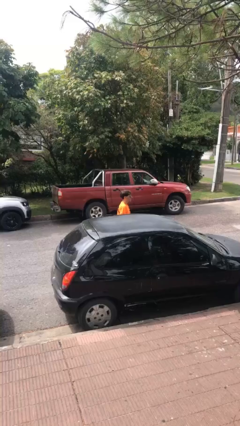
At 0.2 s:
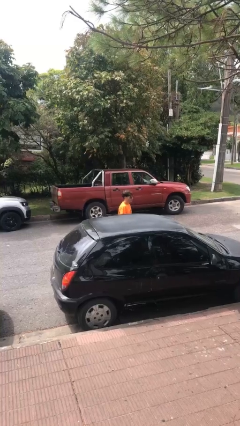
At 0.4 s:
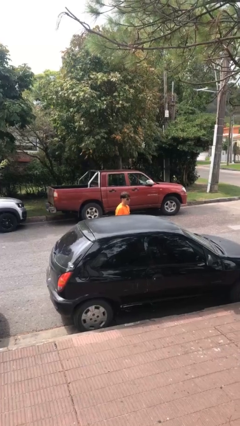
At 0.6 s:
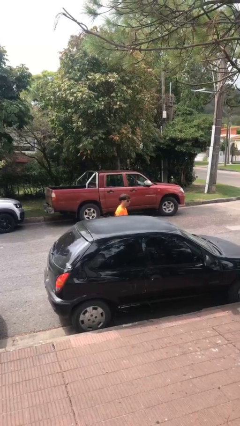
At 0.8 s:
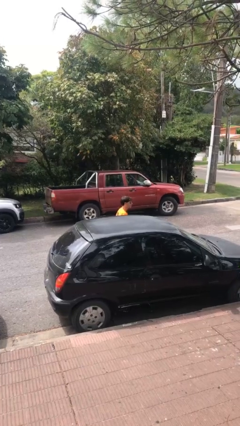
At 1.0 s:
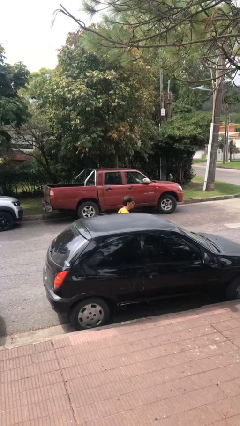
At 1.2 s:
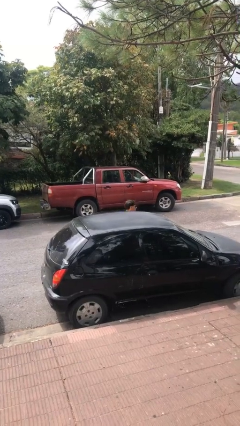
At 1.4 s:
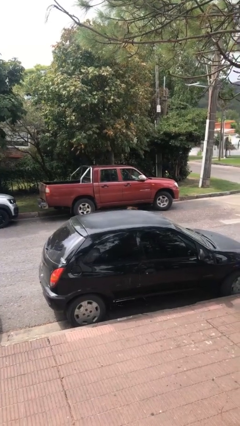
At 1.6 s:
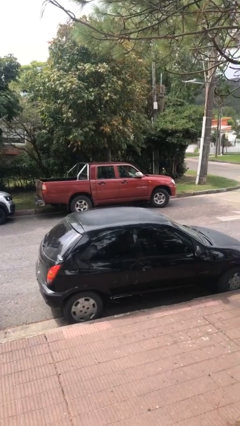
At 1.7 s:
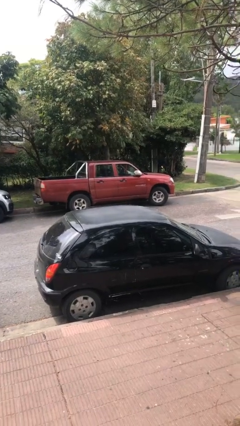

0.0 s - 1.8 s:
person enters car

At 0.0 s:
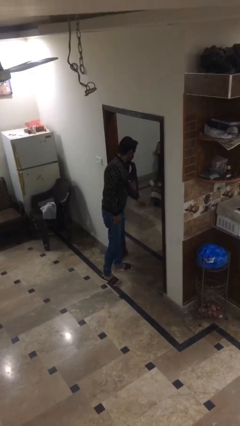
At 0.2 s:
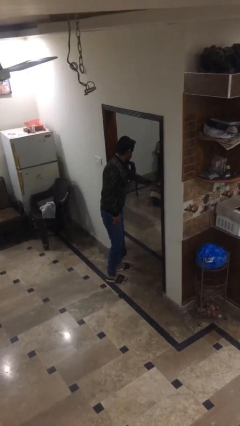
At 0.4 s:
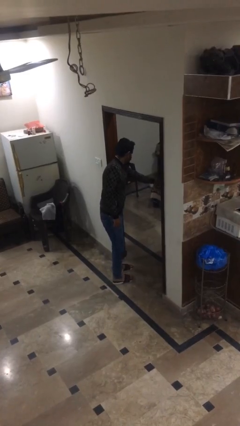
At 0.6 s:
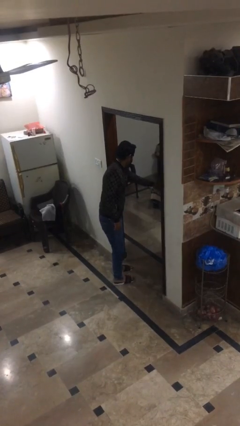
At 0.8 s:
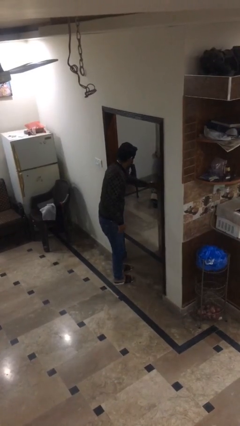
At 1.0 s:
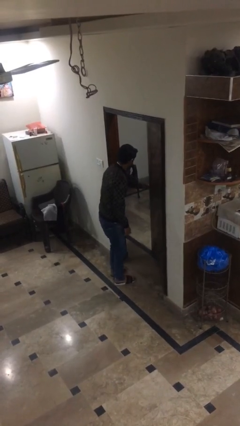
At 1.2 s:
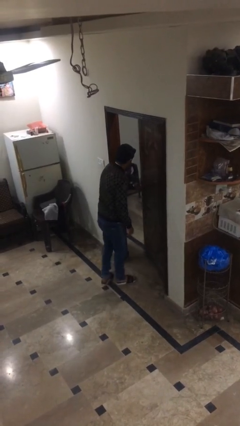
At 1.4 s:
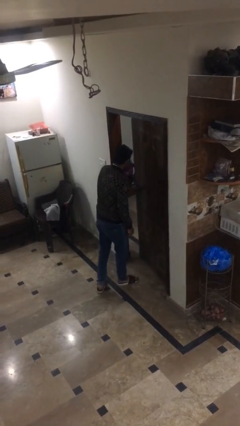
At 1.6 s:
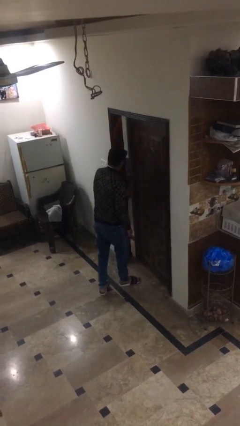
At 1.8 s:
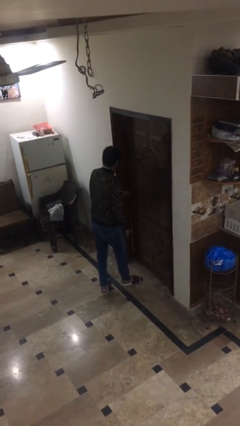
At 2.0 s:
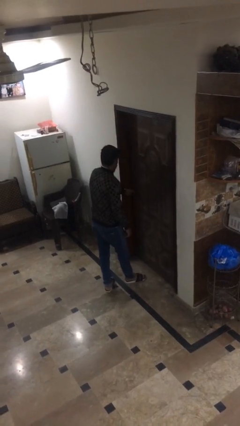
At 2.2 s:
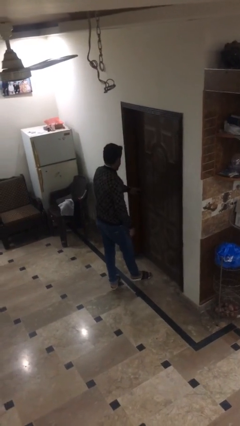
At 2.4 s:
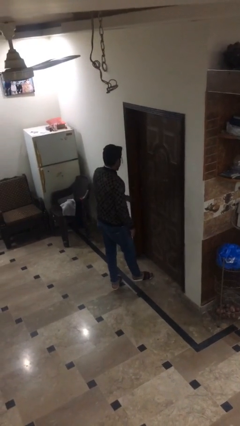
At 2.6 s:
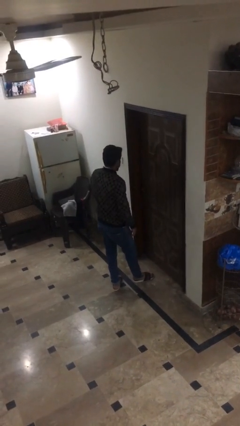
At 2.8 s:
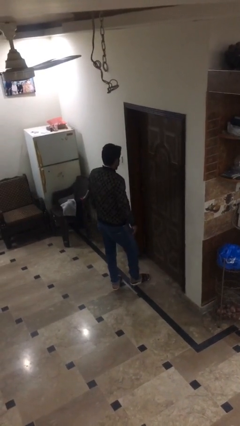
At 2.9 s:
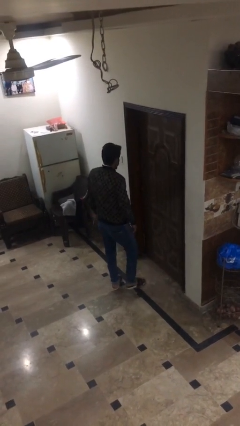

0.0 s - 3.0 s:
person closes facility door

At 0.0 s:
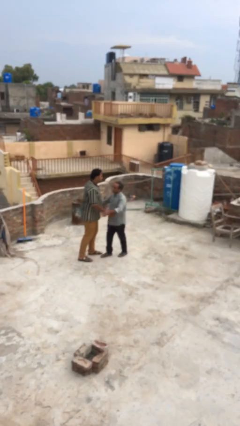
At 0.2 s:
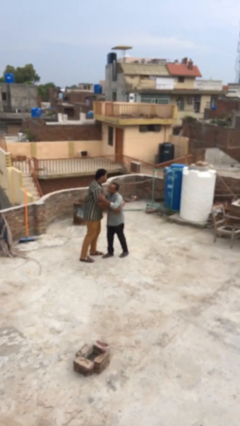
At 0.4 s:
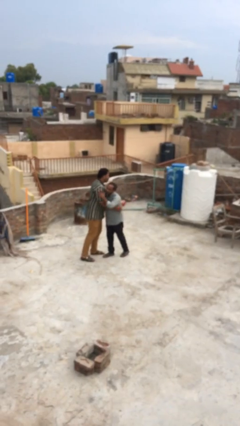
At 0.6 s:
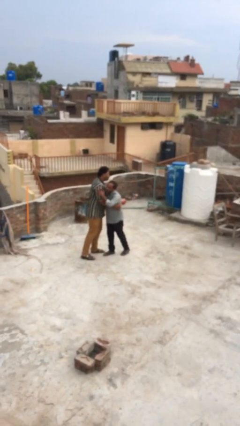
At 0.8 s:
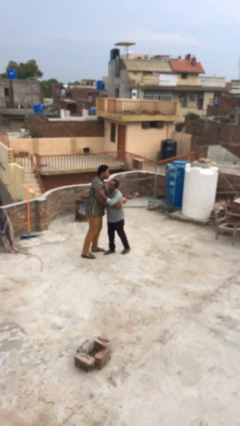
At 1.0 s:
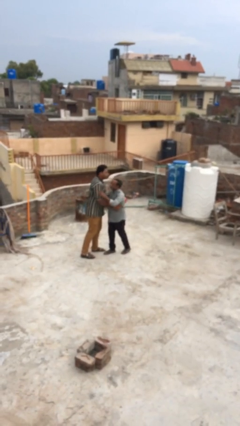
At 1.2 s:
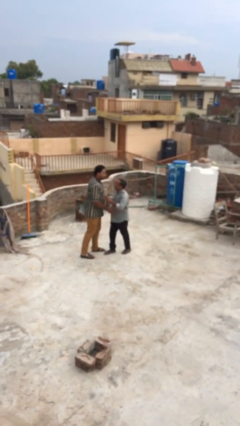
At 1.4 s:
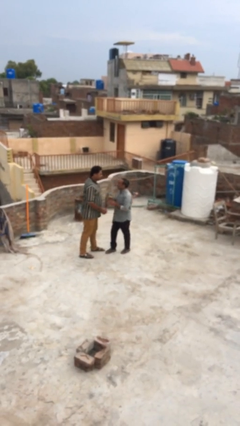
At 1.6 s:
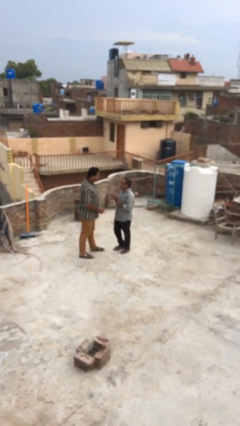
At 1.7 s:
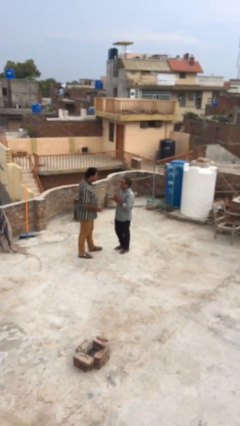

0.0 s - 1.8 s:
person embraces person

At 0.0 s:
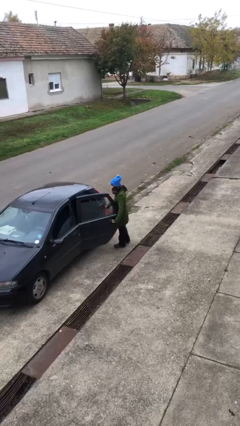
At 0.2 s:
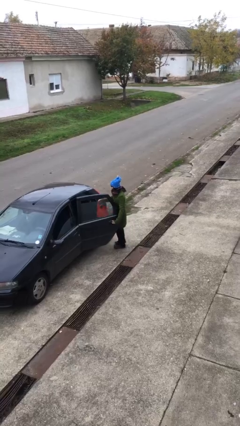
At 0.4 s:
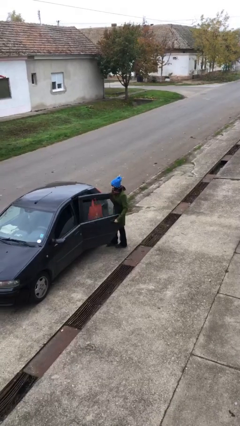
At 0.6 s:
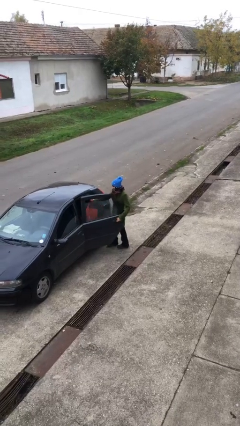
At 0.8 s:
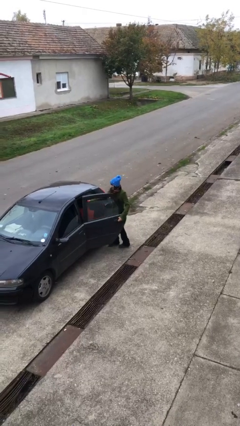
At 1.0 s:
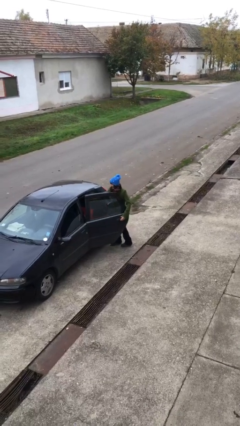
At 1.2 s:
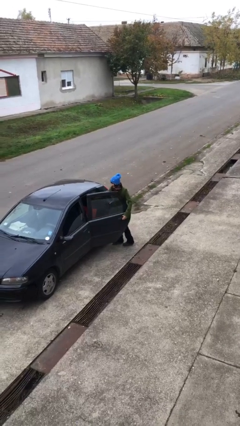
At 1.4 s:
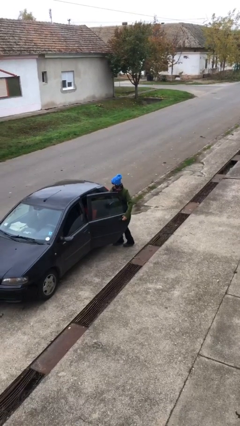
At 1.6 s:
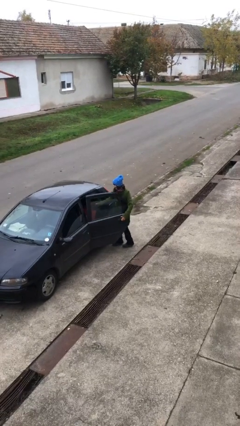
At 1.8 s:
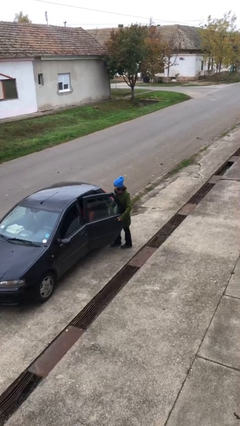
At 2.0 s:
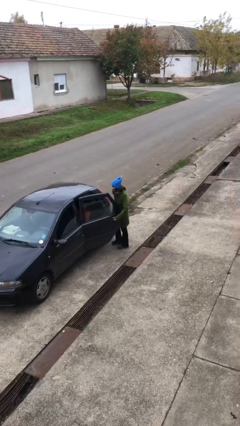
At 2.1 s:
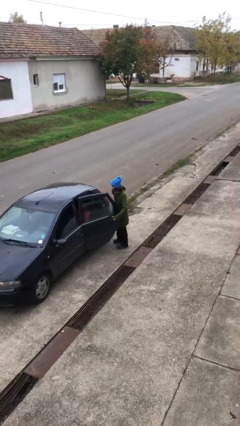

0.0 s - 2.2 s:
person loads car

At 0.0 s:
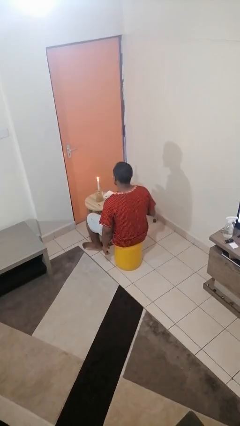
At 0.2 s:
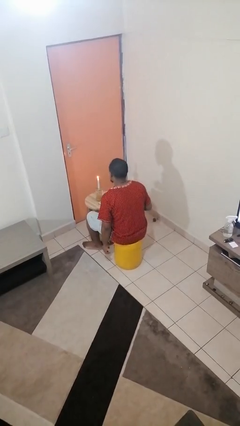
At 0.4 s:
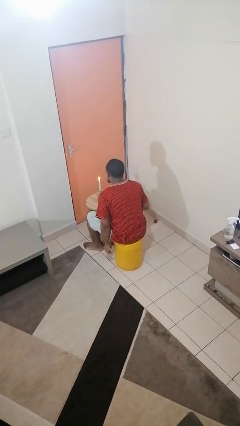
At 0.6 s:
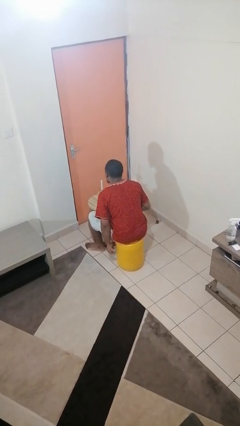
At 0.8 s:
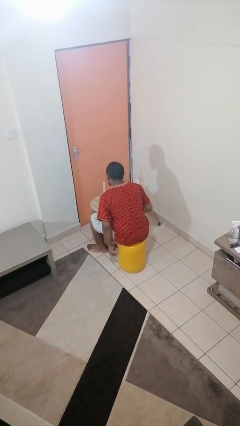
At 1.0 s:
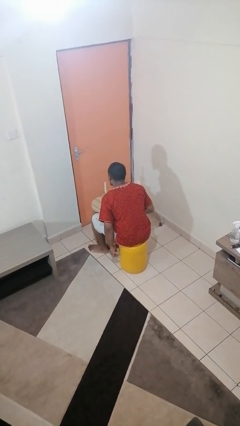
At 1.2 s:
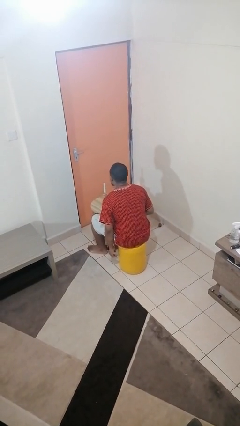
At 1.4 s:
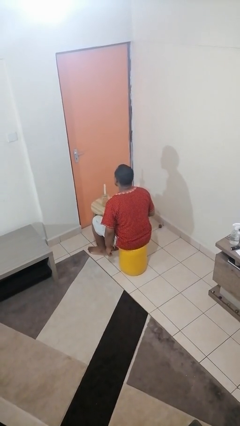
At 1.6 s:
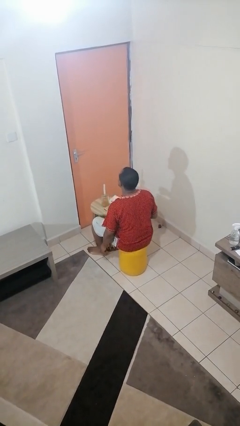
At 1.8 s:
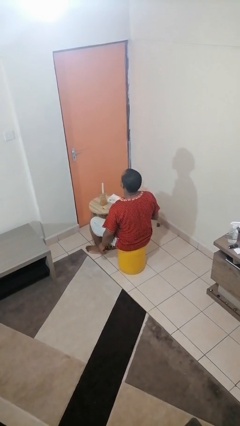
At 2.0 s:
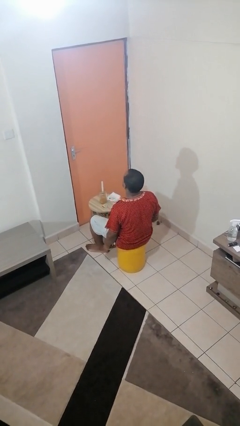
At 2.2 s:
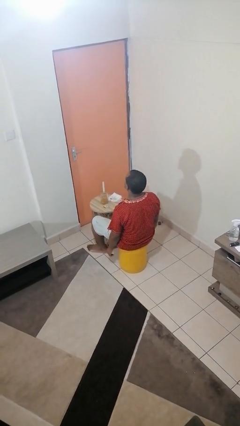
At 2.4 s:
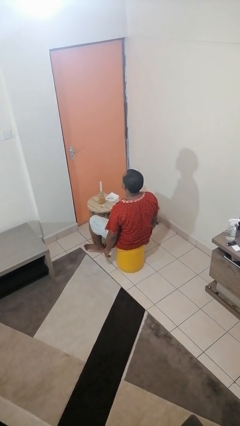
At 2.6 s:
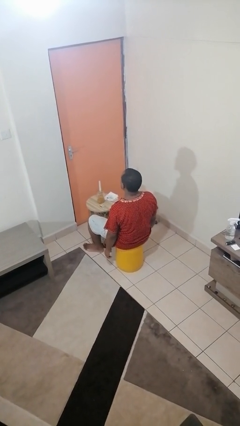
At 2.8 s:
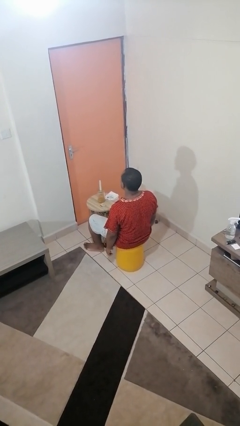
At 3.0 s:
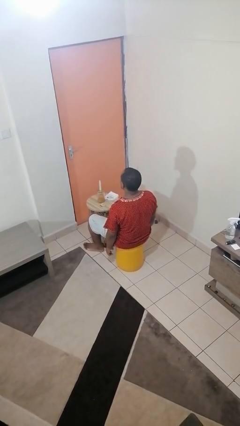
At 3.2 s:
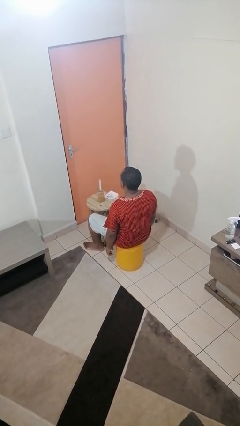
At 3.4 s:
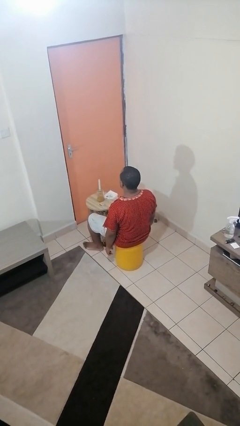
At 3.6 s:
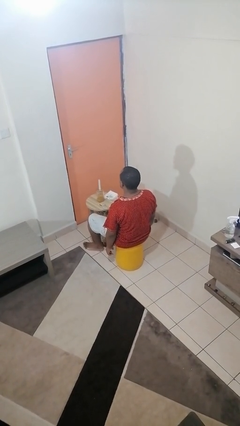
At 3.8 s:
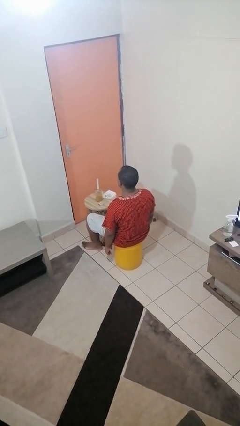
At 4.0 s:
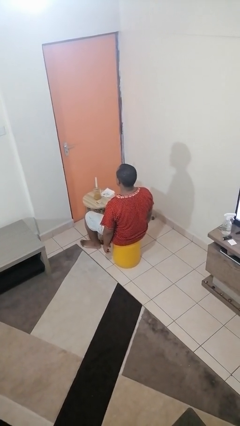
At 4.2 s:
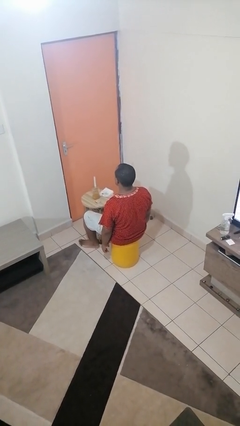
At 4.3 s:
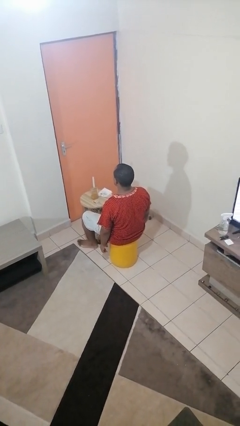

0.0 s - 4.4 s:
person extinguishes candle

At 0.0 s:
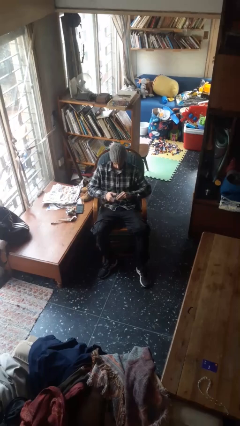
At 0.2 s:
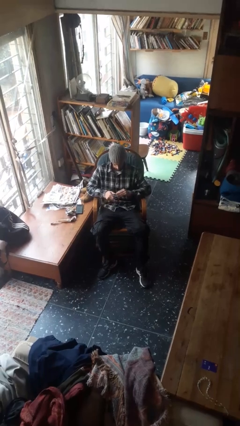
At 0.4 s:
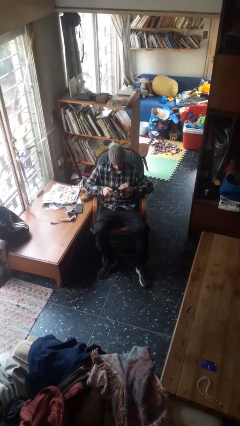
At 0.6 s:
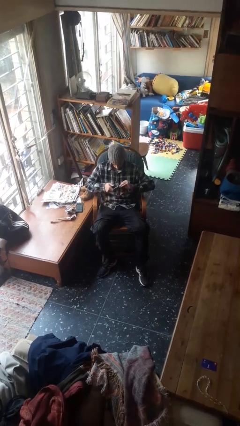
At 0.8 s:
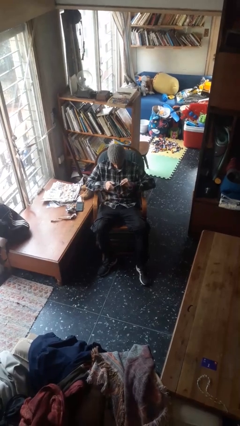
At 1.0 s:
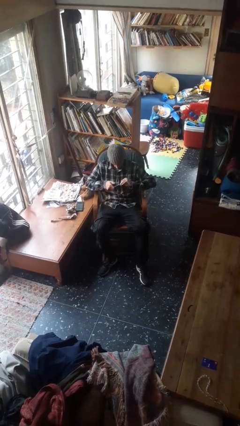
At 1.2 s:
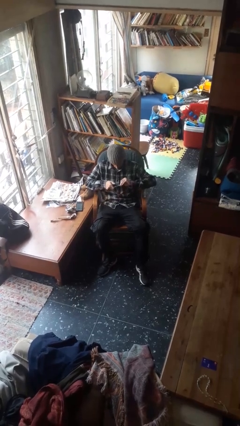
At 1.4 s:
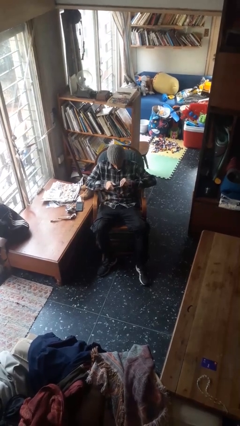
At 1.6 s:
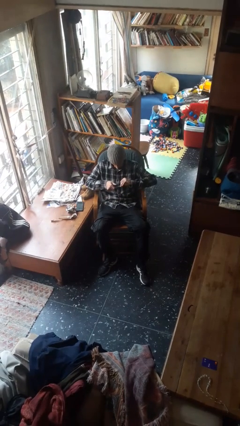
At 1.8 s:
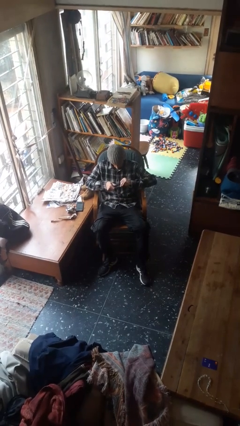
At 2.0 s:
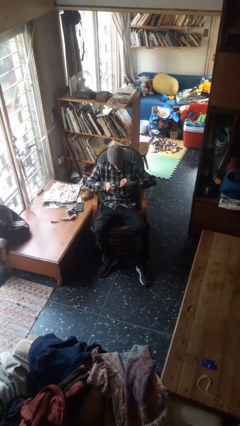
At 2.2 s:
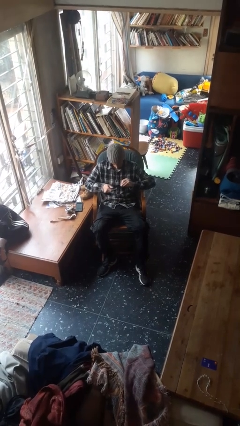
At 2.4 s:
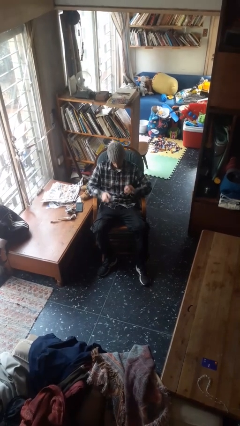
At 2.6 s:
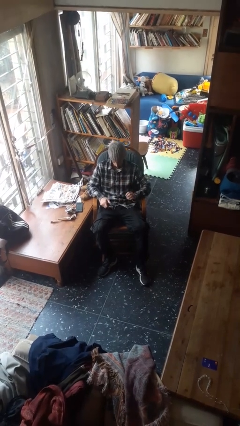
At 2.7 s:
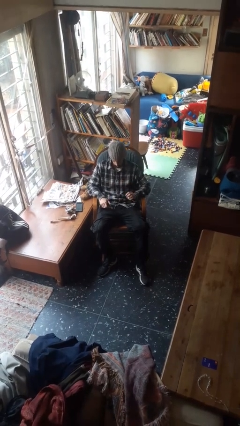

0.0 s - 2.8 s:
person clips fingernails

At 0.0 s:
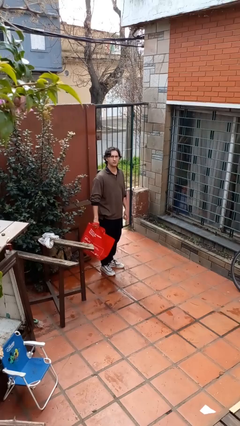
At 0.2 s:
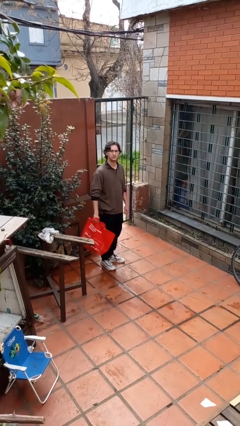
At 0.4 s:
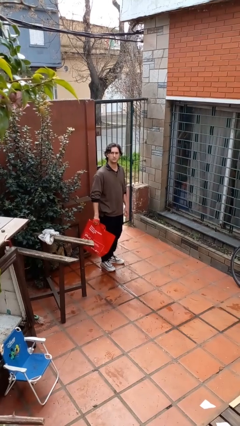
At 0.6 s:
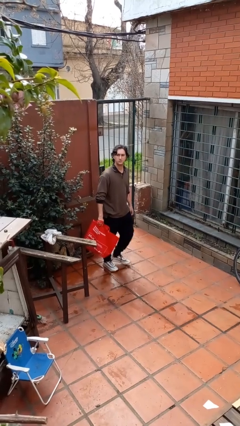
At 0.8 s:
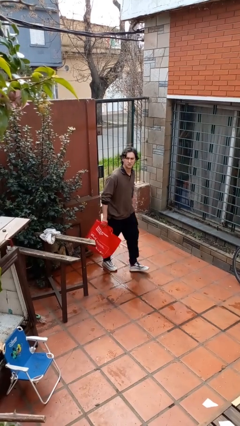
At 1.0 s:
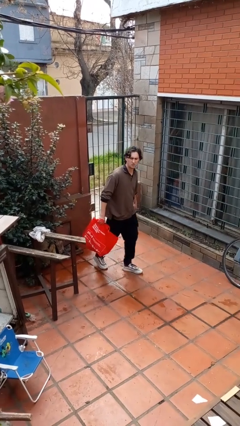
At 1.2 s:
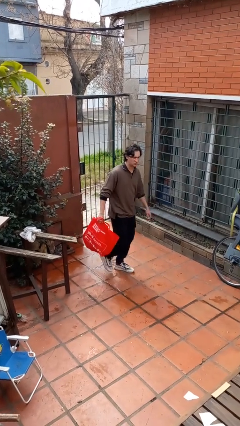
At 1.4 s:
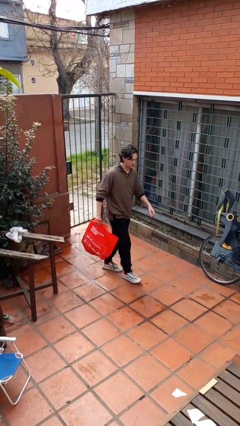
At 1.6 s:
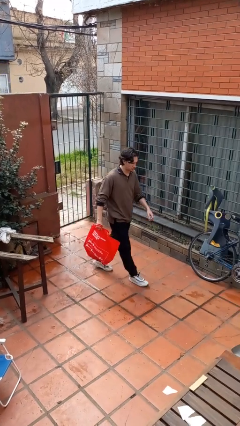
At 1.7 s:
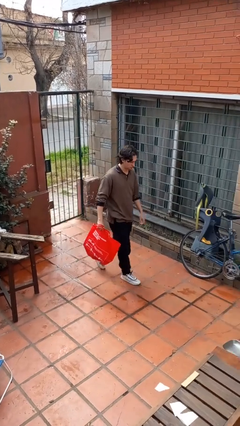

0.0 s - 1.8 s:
person carries groceries
